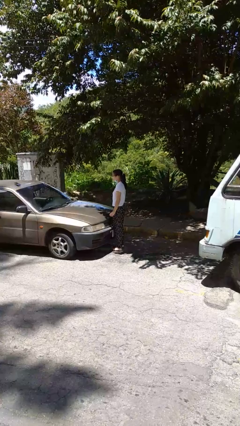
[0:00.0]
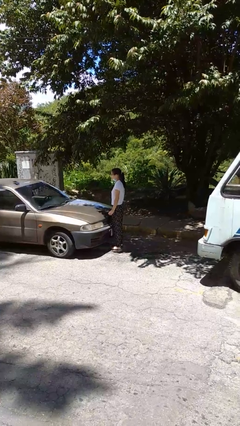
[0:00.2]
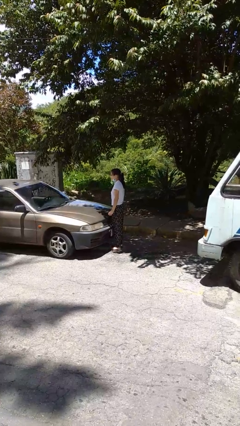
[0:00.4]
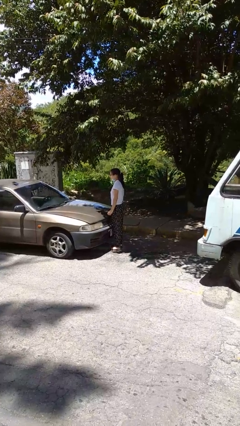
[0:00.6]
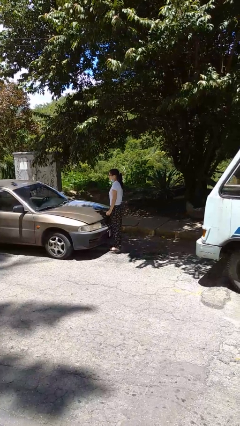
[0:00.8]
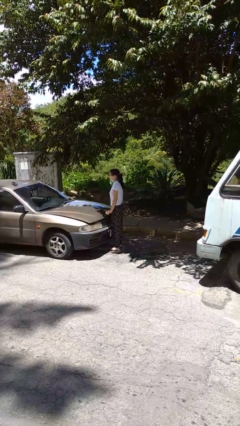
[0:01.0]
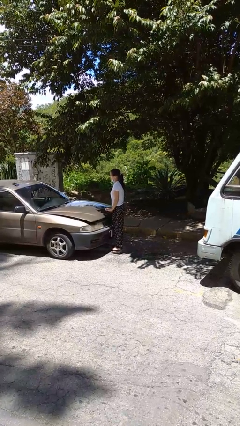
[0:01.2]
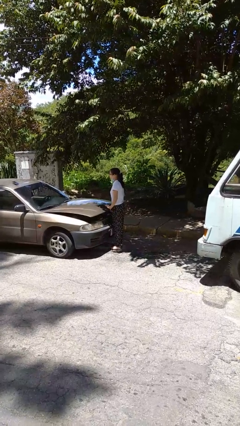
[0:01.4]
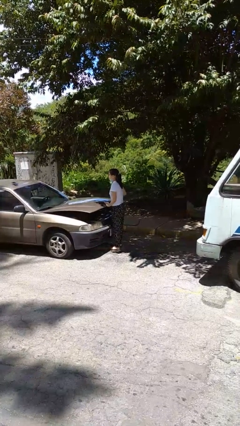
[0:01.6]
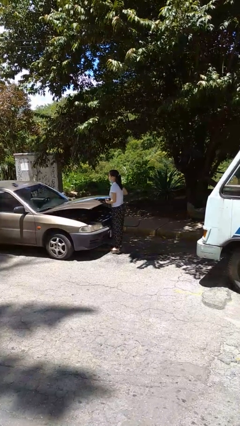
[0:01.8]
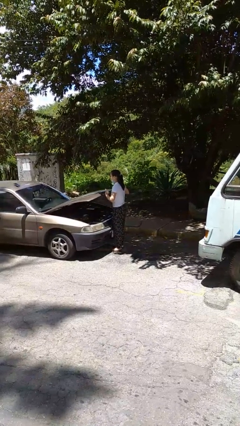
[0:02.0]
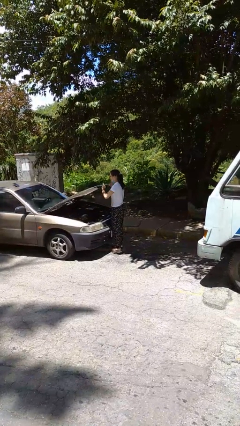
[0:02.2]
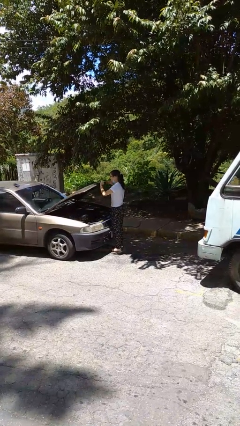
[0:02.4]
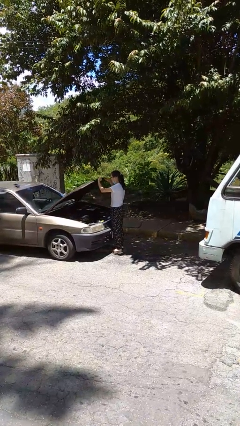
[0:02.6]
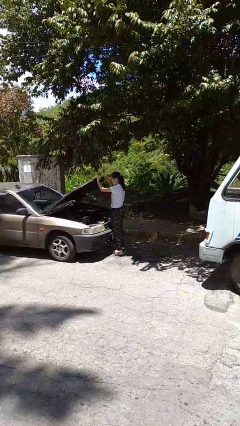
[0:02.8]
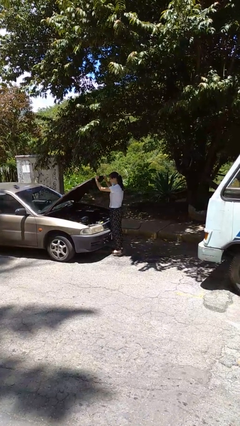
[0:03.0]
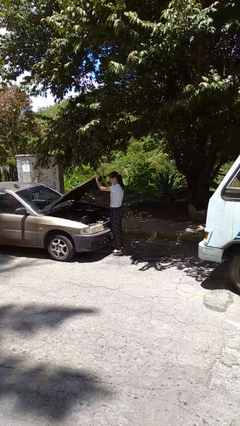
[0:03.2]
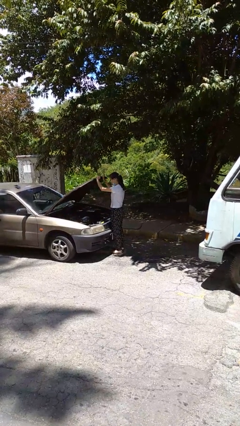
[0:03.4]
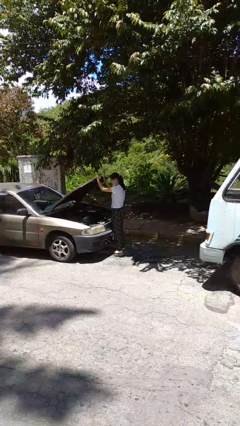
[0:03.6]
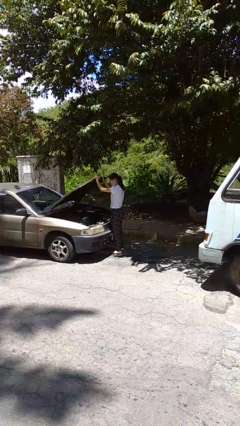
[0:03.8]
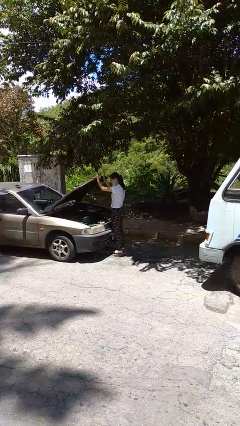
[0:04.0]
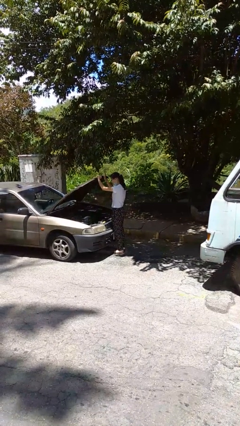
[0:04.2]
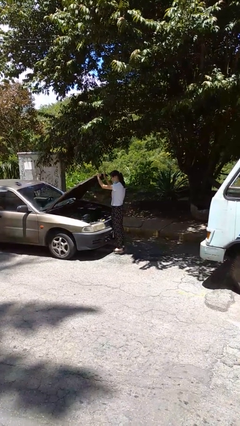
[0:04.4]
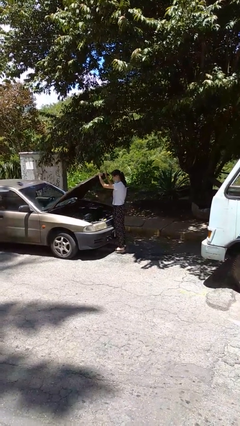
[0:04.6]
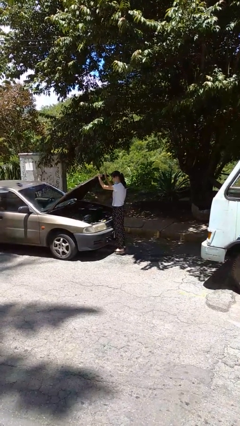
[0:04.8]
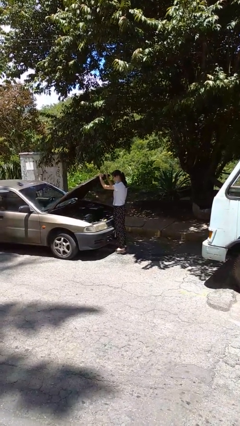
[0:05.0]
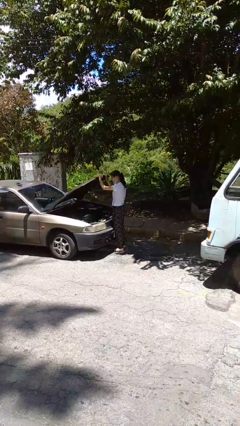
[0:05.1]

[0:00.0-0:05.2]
person opens car hood

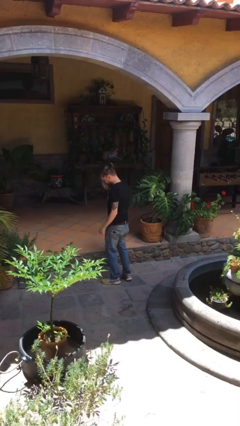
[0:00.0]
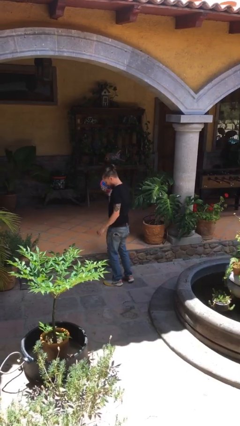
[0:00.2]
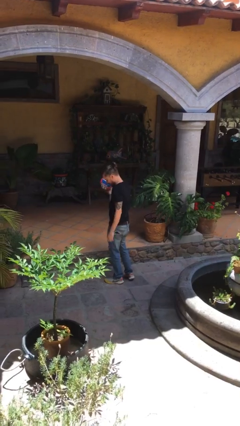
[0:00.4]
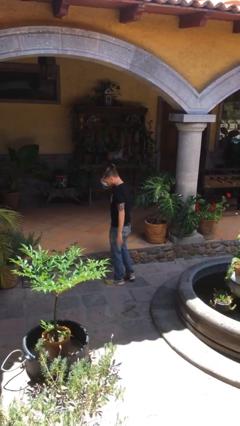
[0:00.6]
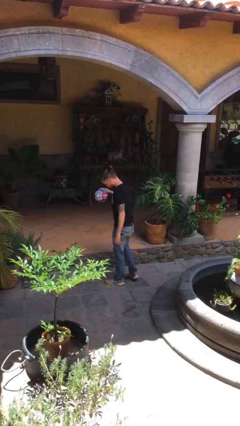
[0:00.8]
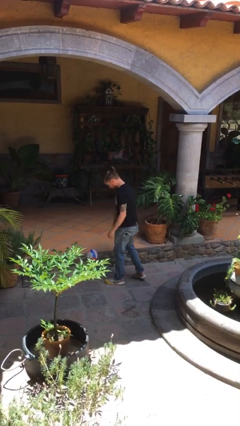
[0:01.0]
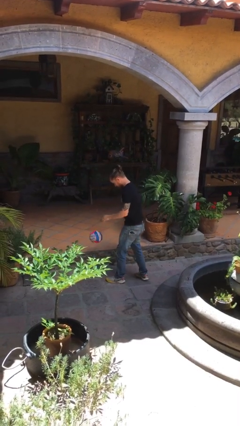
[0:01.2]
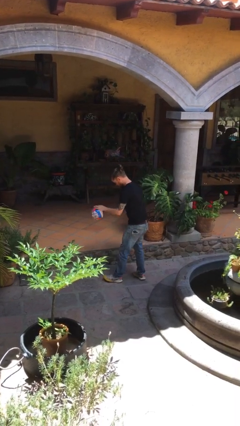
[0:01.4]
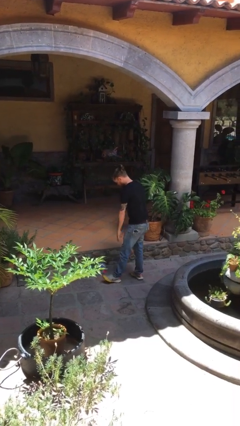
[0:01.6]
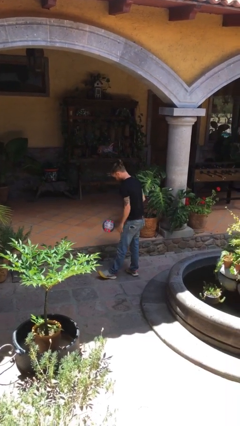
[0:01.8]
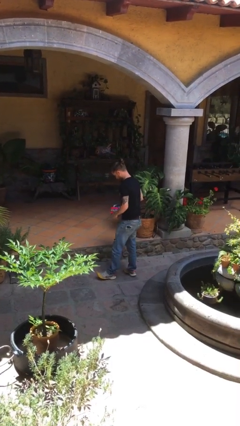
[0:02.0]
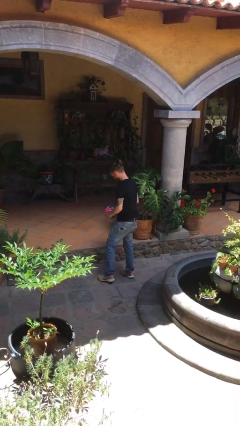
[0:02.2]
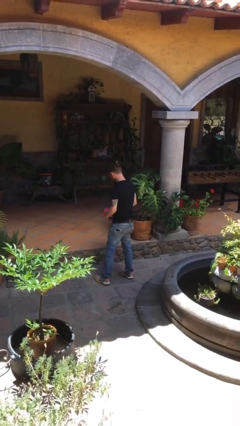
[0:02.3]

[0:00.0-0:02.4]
person bounces ball on floor

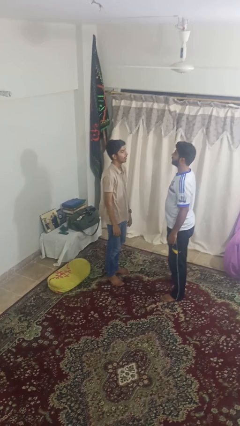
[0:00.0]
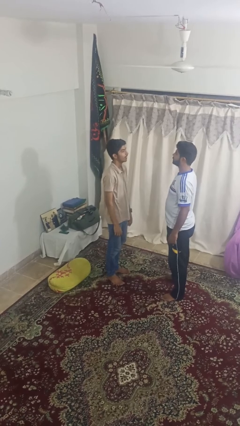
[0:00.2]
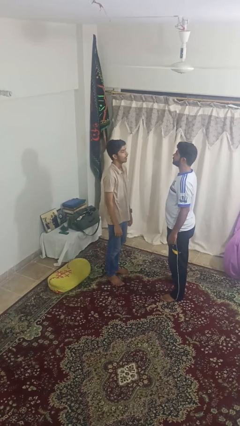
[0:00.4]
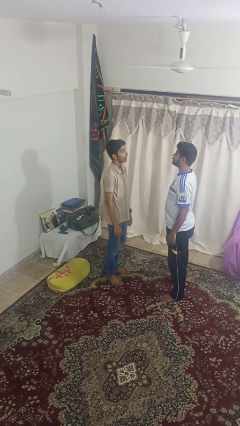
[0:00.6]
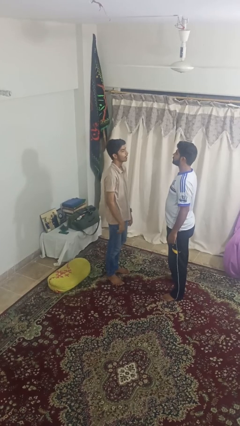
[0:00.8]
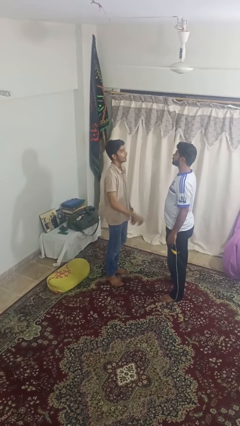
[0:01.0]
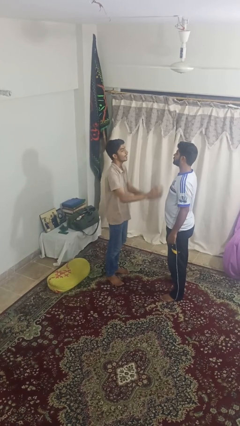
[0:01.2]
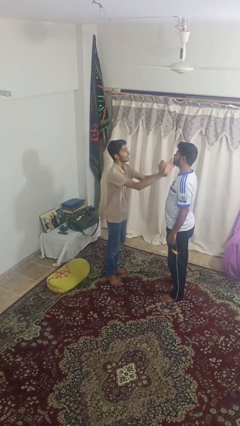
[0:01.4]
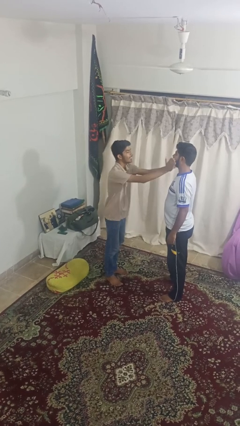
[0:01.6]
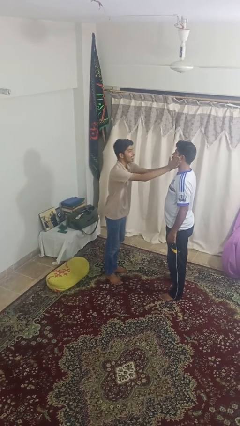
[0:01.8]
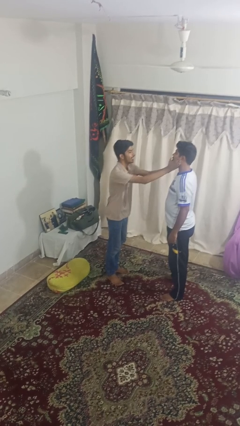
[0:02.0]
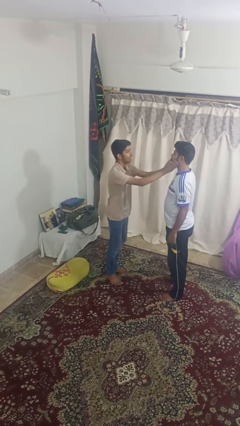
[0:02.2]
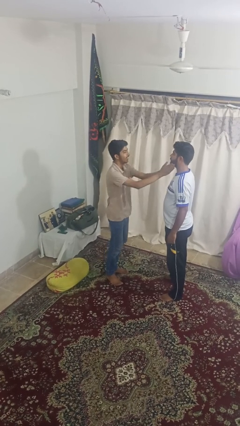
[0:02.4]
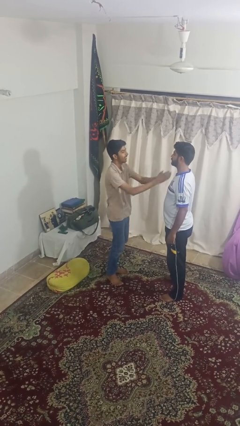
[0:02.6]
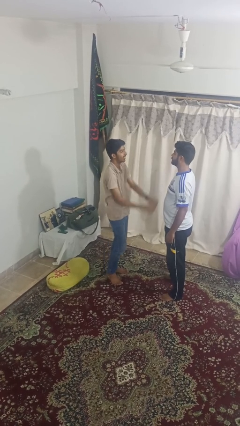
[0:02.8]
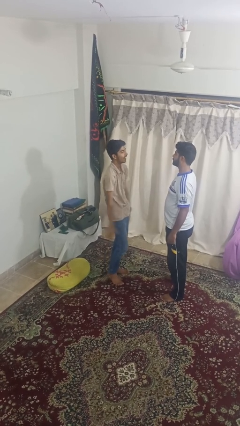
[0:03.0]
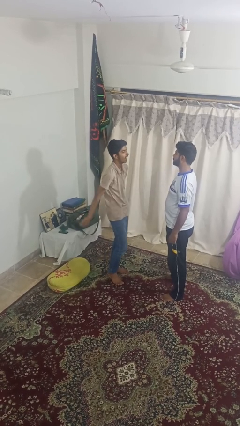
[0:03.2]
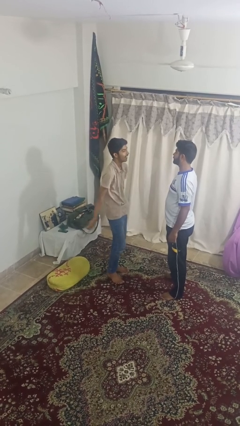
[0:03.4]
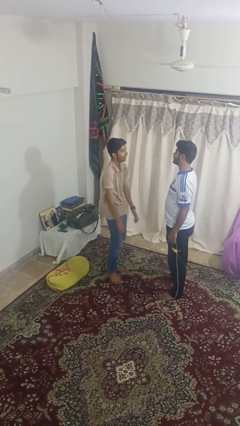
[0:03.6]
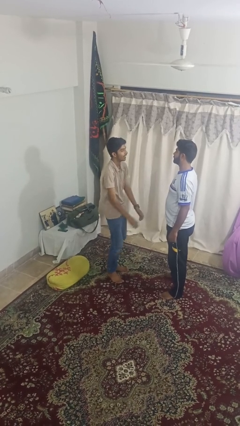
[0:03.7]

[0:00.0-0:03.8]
person touches face of person

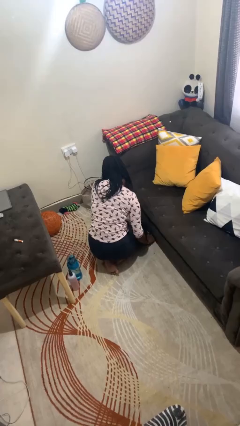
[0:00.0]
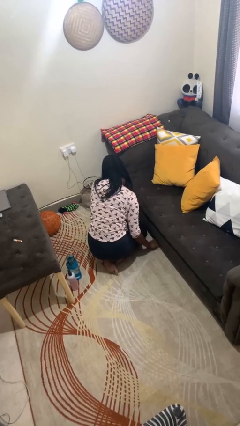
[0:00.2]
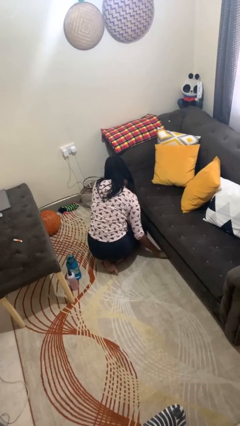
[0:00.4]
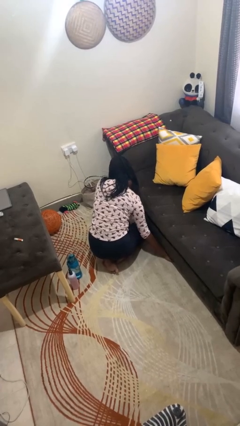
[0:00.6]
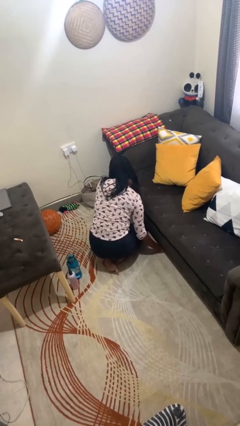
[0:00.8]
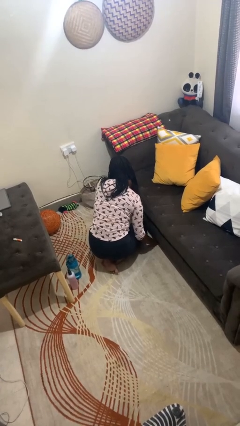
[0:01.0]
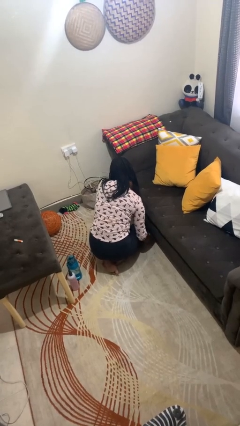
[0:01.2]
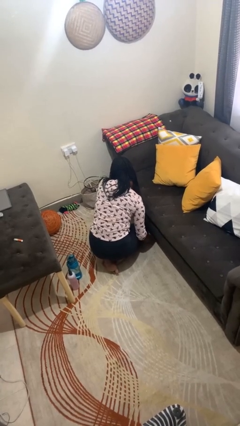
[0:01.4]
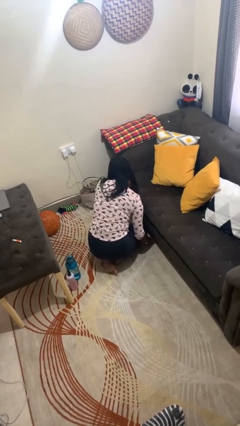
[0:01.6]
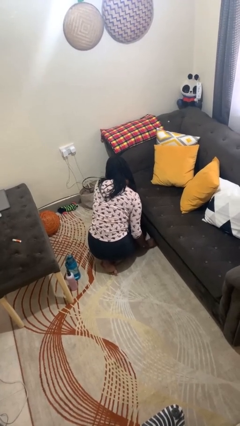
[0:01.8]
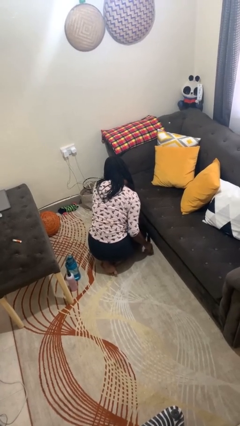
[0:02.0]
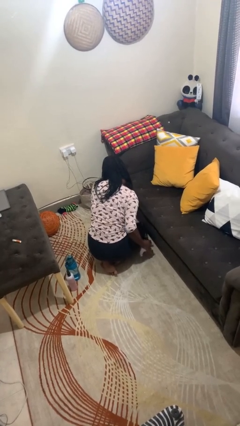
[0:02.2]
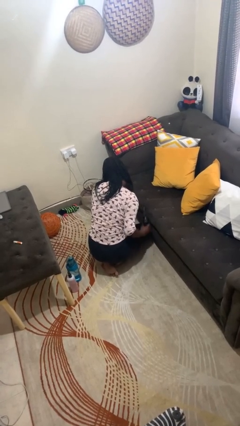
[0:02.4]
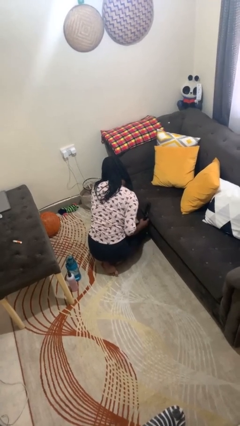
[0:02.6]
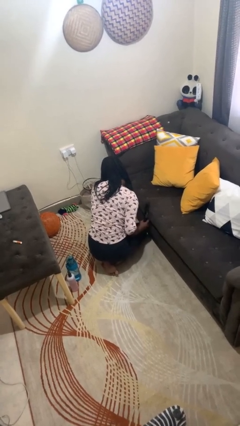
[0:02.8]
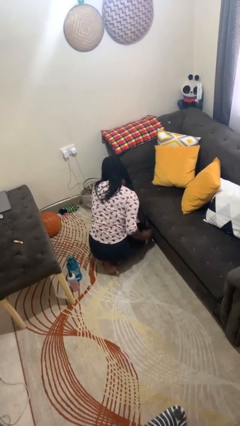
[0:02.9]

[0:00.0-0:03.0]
person searches under couch

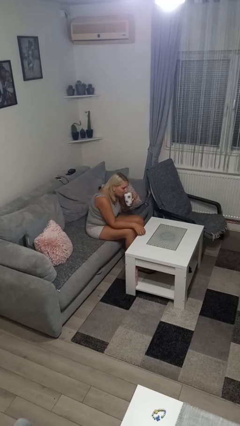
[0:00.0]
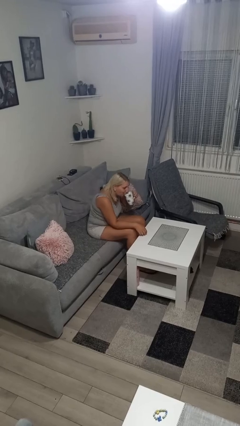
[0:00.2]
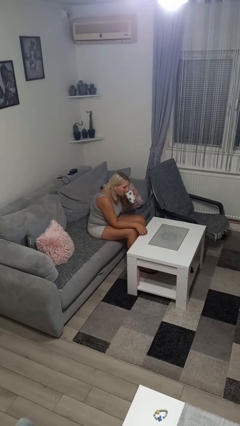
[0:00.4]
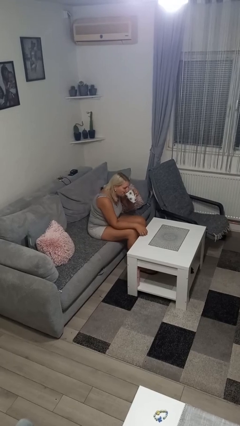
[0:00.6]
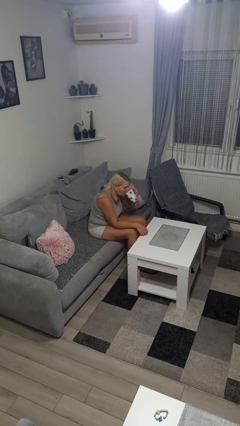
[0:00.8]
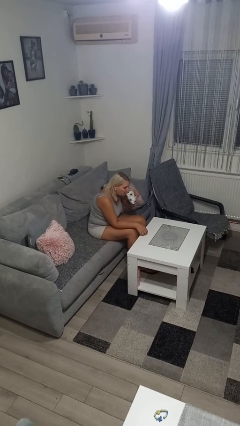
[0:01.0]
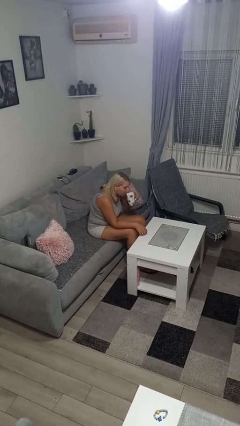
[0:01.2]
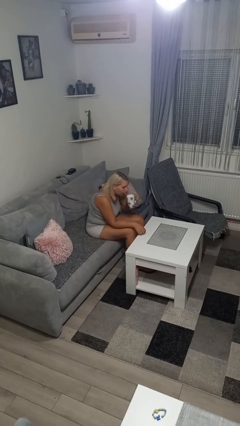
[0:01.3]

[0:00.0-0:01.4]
person drinks from mug

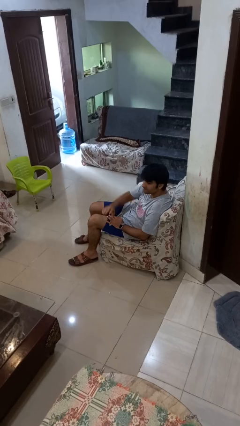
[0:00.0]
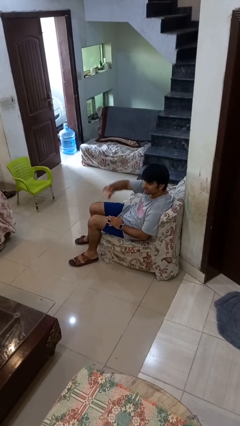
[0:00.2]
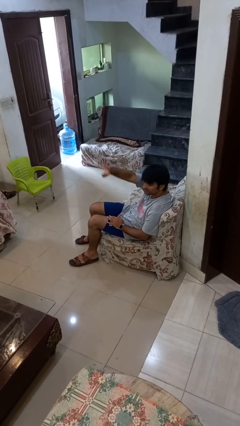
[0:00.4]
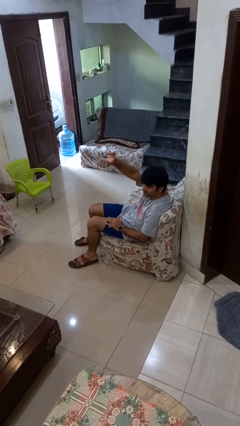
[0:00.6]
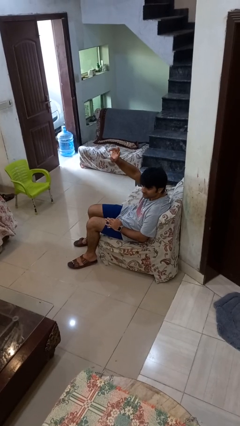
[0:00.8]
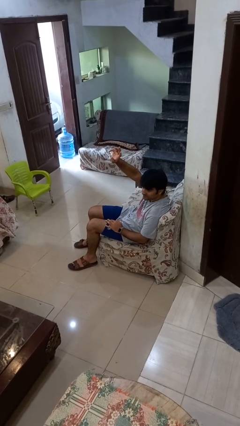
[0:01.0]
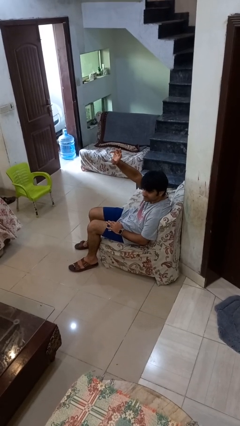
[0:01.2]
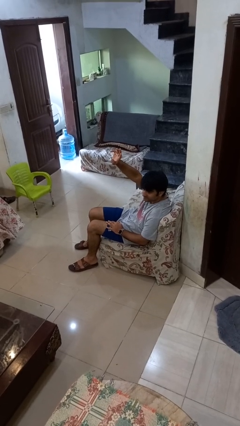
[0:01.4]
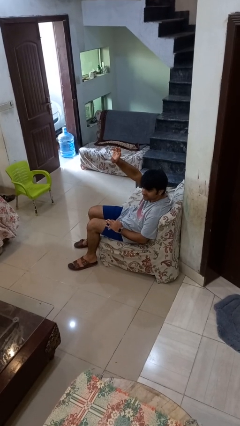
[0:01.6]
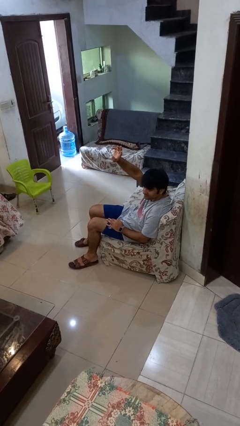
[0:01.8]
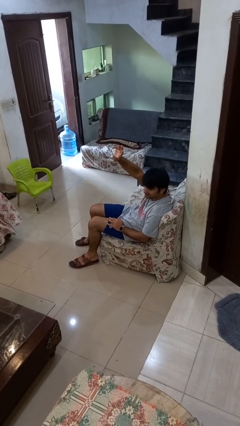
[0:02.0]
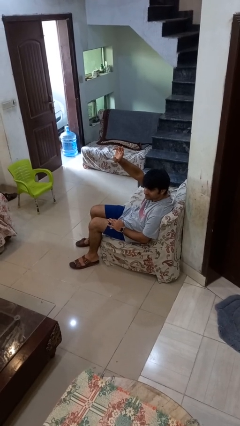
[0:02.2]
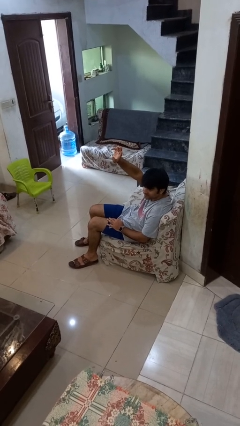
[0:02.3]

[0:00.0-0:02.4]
person gestures raise hand
